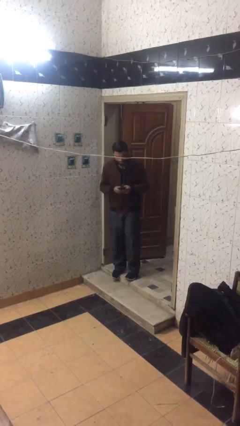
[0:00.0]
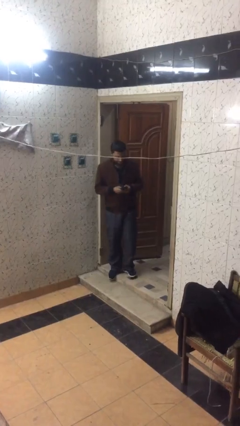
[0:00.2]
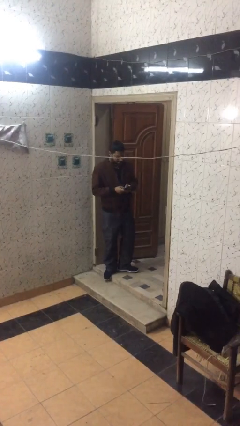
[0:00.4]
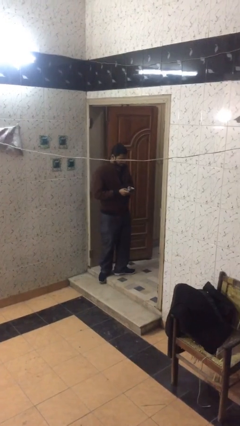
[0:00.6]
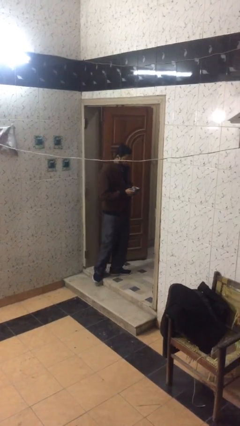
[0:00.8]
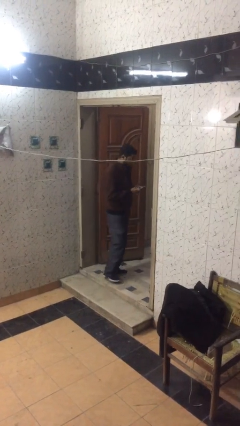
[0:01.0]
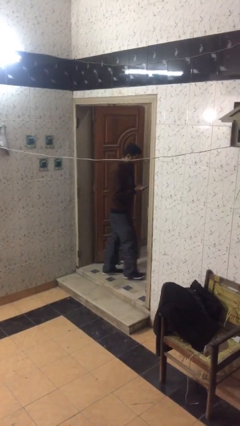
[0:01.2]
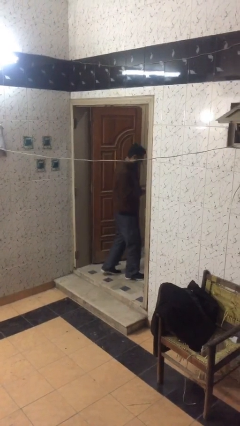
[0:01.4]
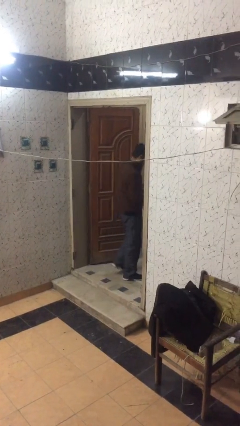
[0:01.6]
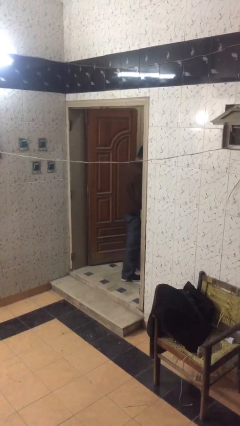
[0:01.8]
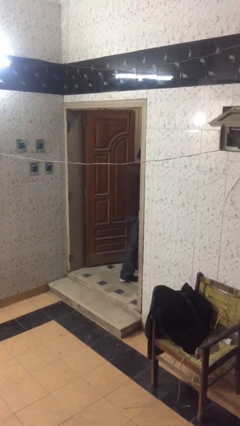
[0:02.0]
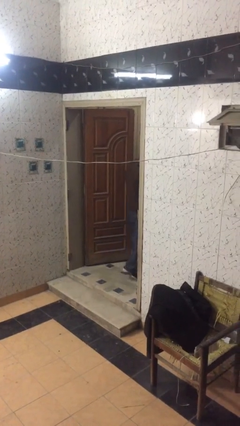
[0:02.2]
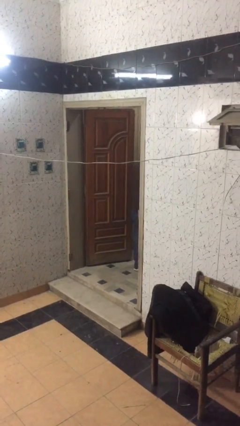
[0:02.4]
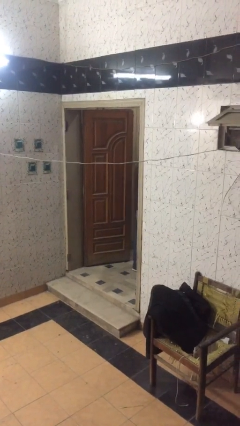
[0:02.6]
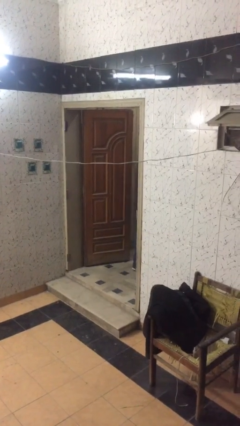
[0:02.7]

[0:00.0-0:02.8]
person exits scene through structure

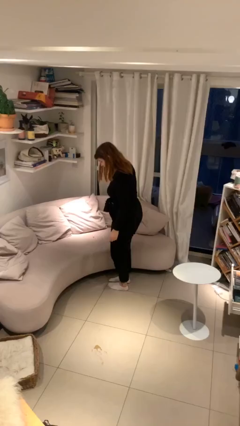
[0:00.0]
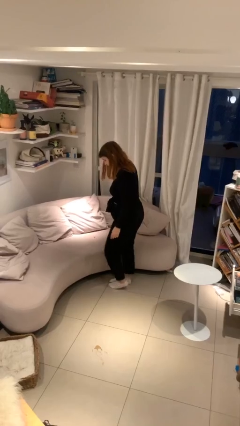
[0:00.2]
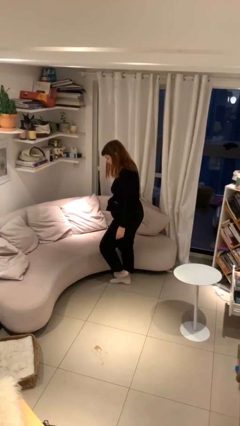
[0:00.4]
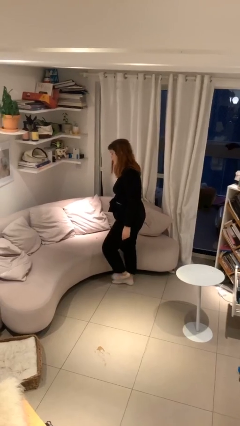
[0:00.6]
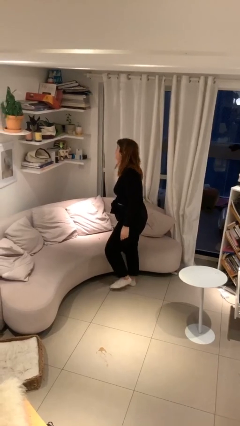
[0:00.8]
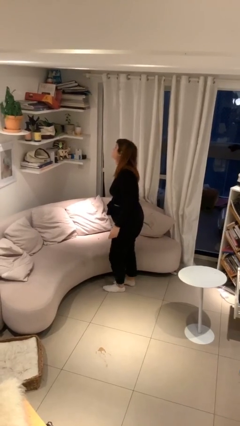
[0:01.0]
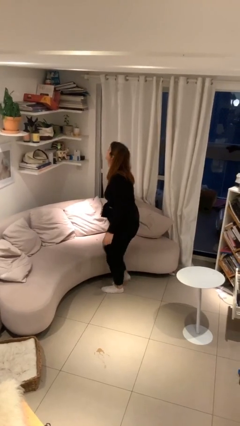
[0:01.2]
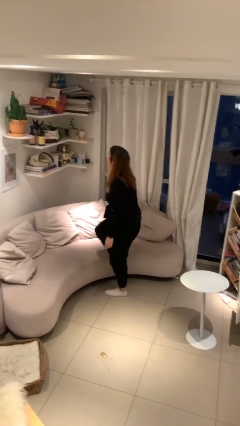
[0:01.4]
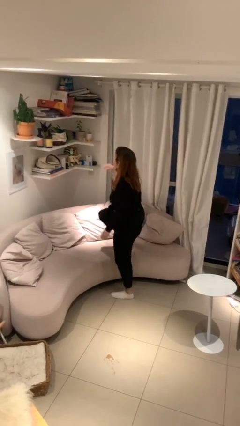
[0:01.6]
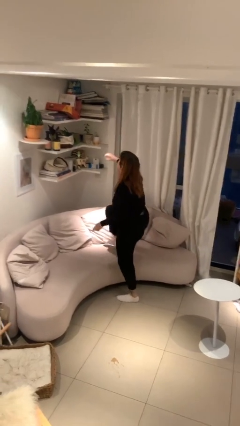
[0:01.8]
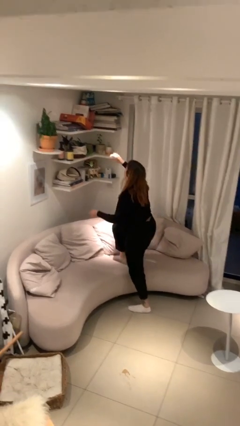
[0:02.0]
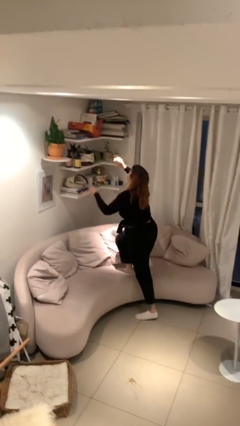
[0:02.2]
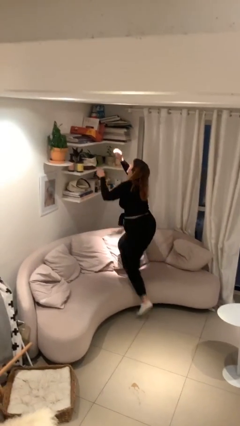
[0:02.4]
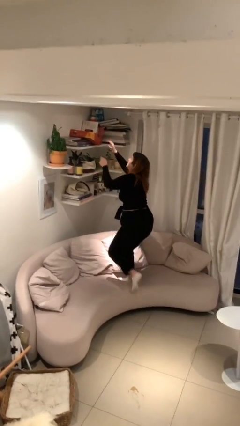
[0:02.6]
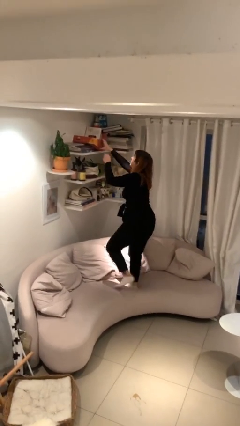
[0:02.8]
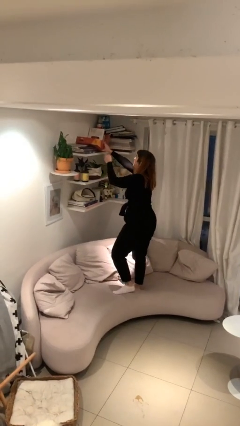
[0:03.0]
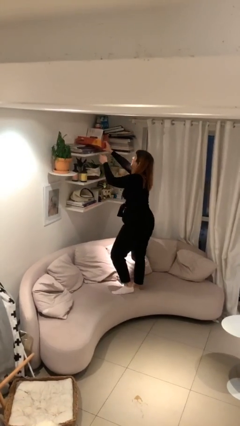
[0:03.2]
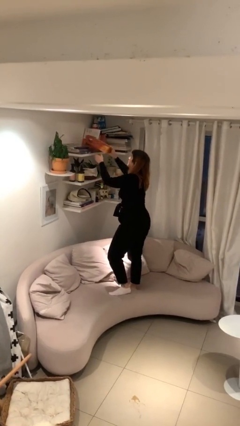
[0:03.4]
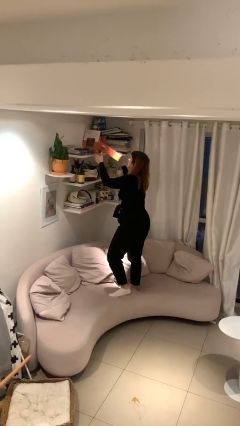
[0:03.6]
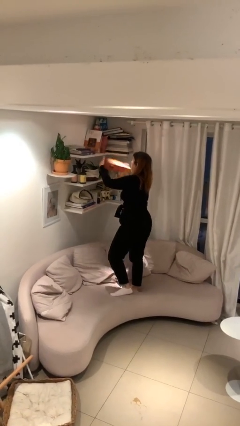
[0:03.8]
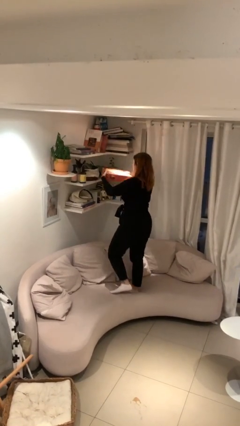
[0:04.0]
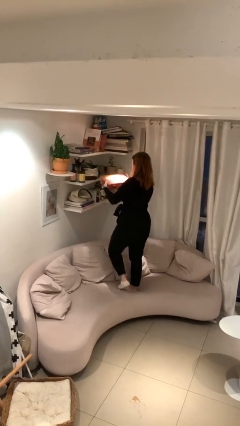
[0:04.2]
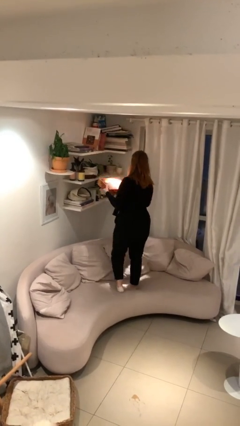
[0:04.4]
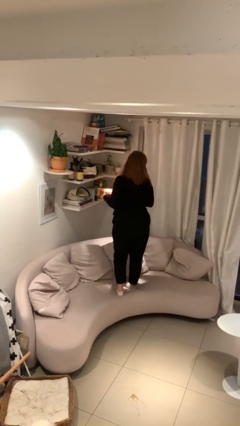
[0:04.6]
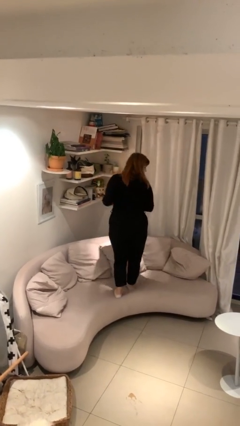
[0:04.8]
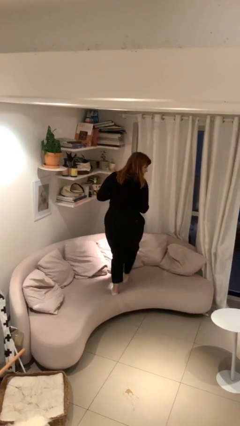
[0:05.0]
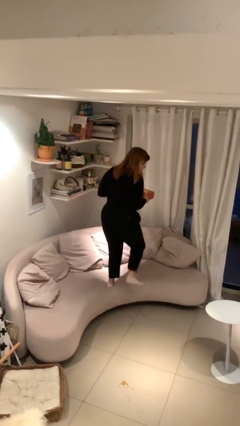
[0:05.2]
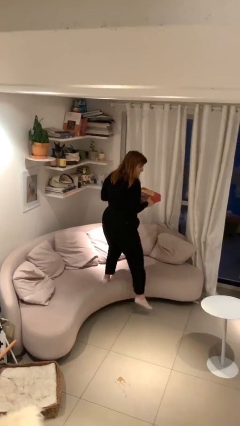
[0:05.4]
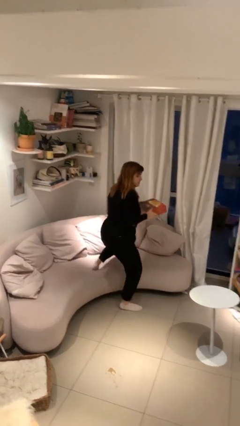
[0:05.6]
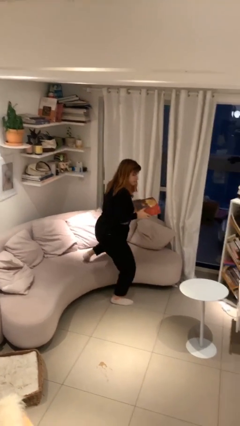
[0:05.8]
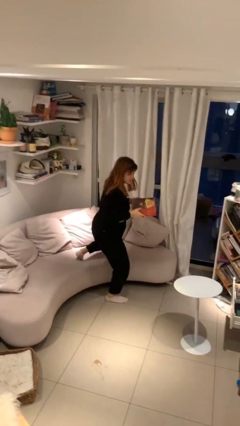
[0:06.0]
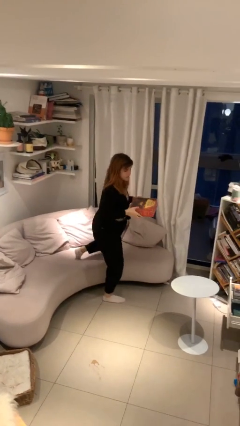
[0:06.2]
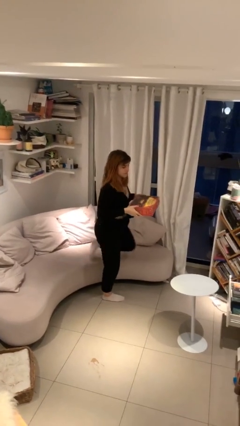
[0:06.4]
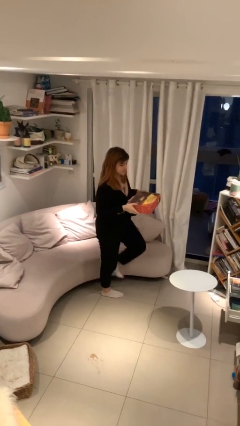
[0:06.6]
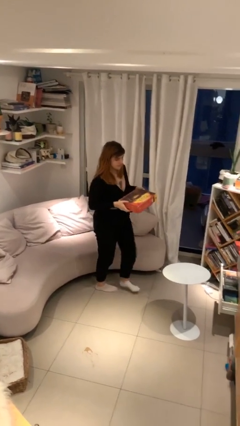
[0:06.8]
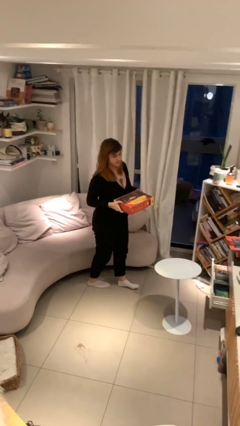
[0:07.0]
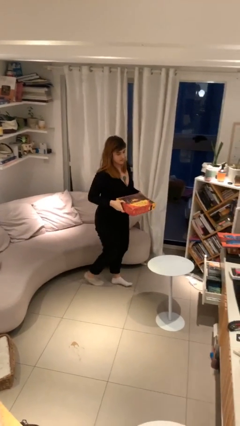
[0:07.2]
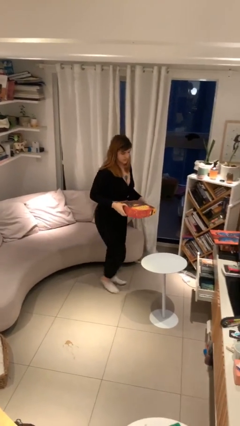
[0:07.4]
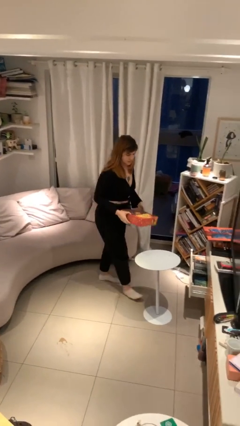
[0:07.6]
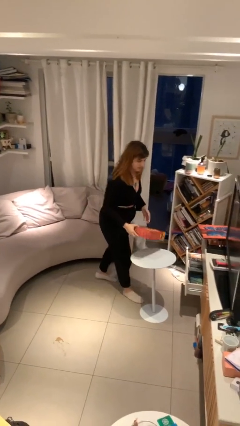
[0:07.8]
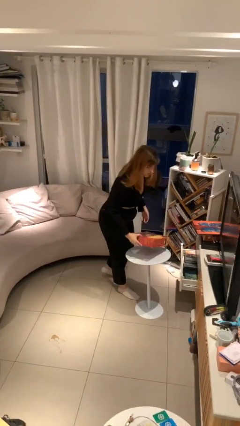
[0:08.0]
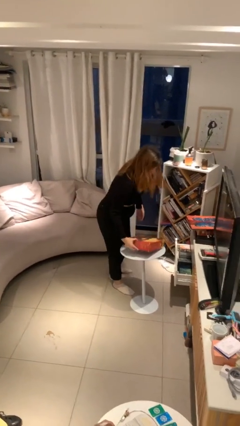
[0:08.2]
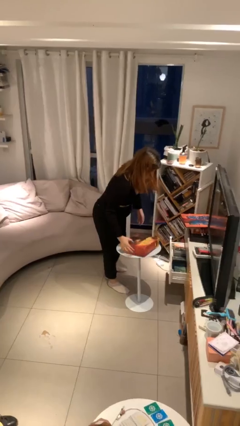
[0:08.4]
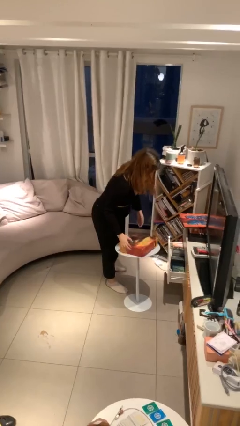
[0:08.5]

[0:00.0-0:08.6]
person picks up object from shelf

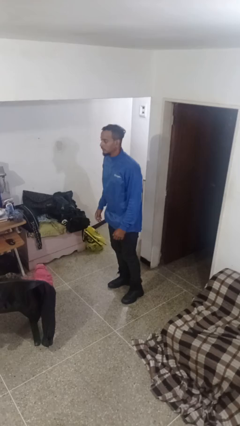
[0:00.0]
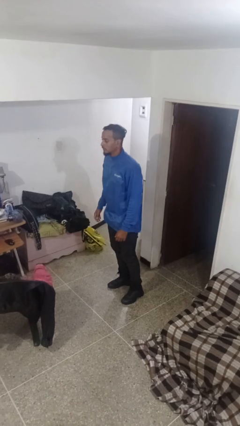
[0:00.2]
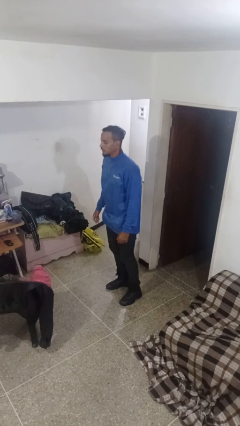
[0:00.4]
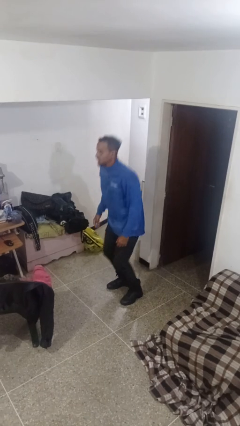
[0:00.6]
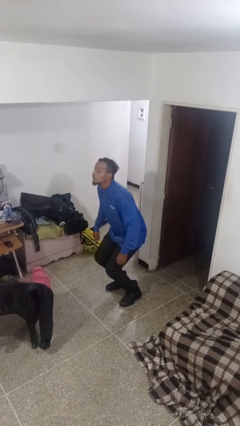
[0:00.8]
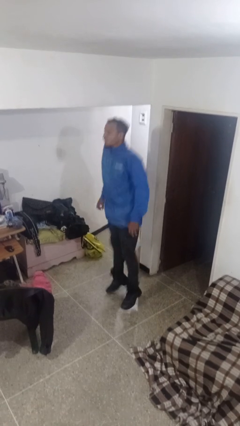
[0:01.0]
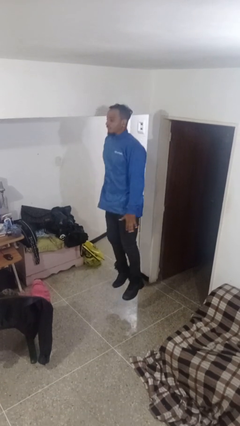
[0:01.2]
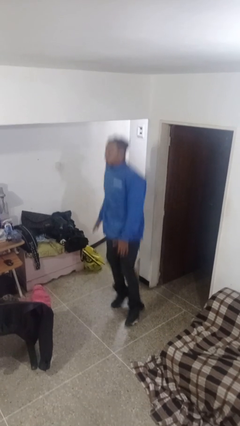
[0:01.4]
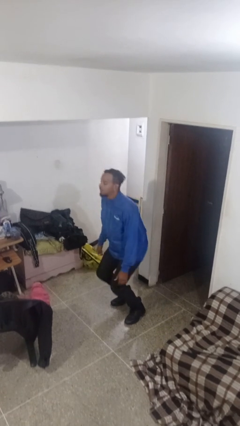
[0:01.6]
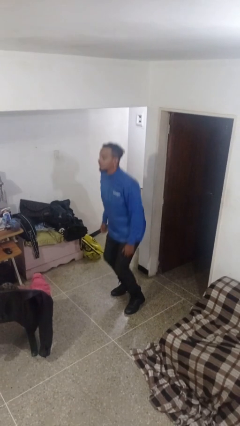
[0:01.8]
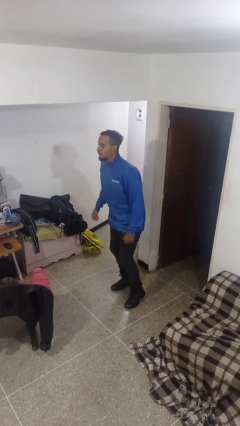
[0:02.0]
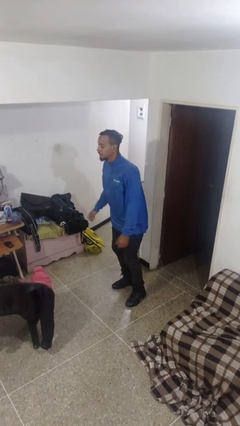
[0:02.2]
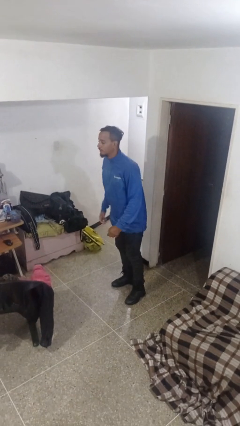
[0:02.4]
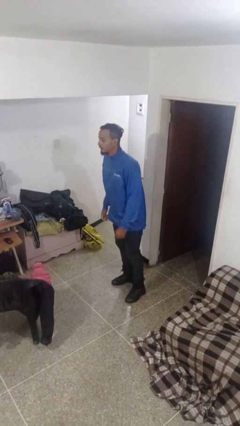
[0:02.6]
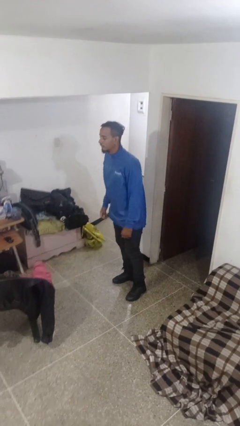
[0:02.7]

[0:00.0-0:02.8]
person jumps

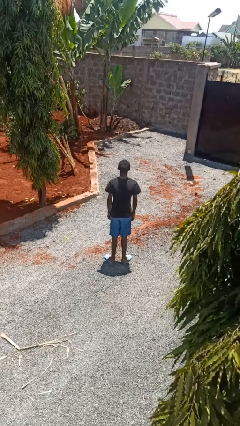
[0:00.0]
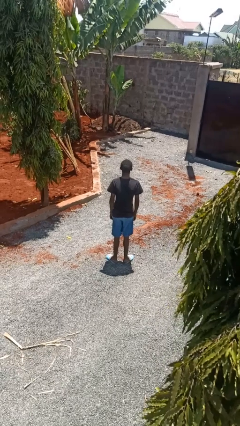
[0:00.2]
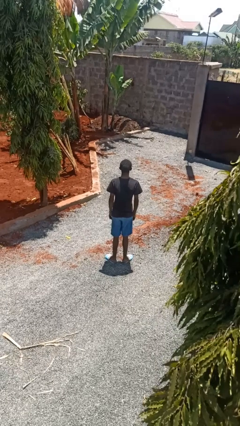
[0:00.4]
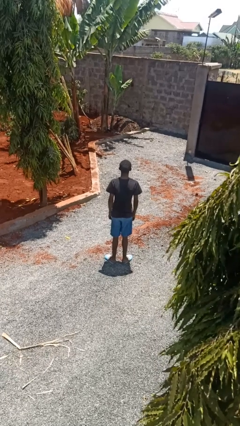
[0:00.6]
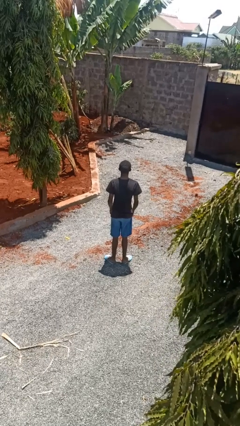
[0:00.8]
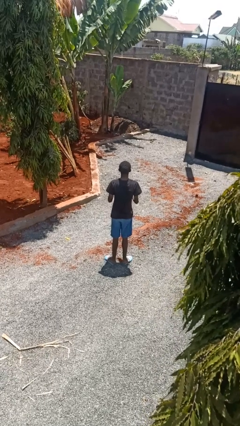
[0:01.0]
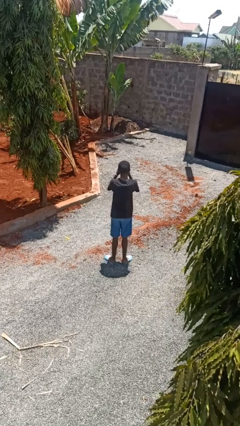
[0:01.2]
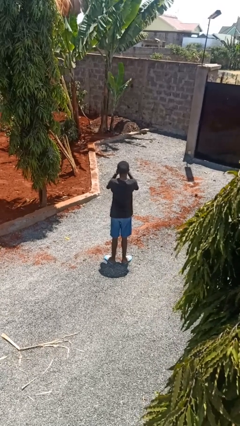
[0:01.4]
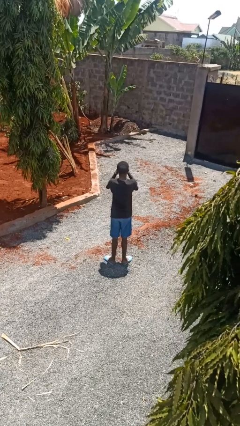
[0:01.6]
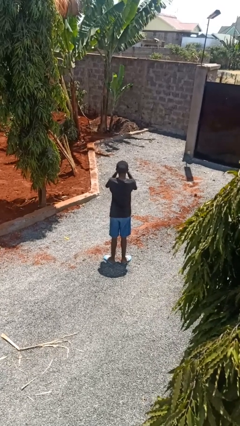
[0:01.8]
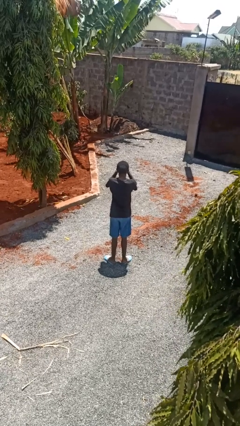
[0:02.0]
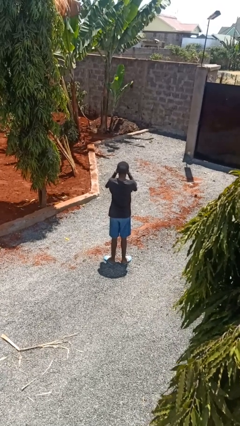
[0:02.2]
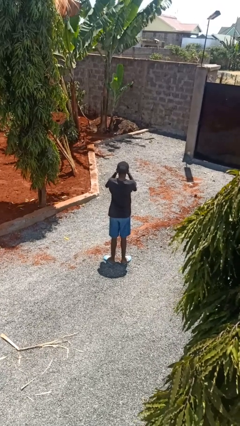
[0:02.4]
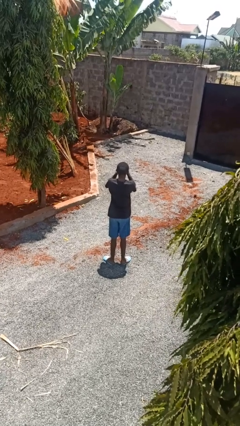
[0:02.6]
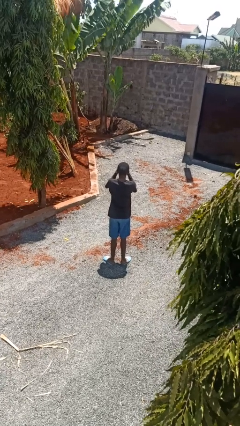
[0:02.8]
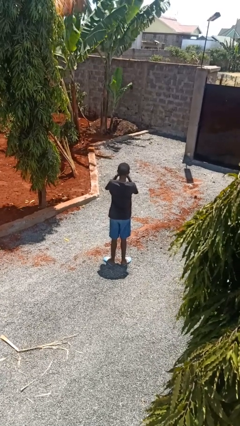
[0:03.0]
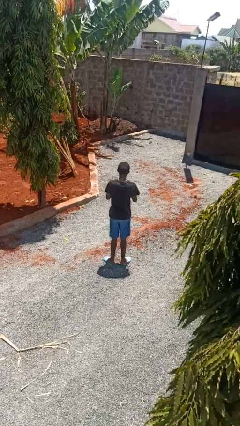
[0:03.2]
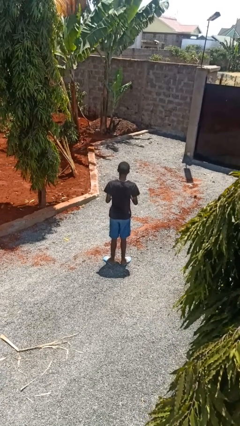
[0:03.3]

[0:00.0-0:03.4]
person rubs eyes

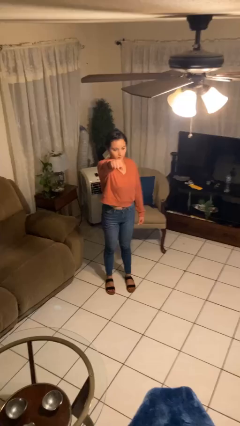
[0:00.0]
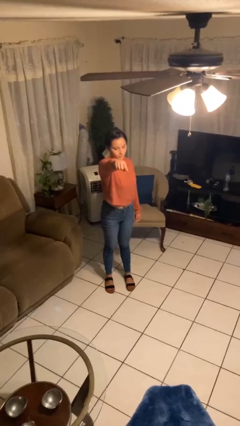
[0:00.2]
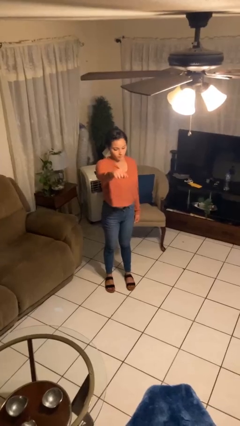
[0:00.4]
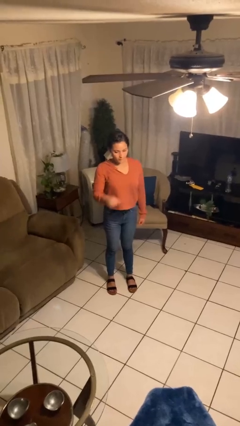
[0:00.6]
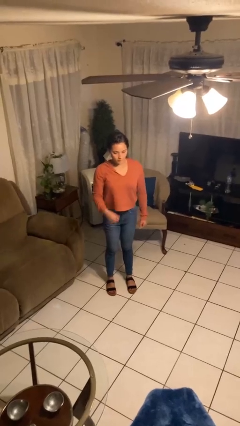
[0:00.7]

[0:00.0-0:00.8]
person punches
